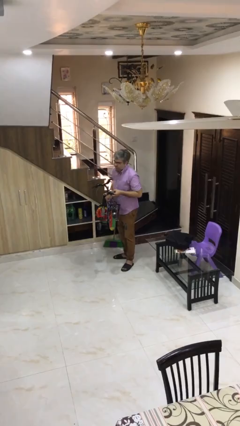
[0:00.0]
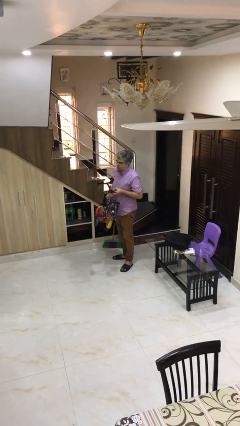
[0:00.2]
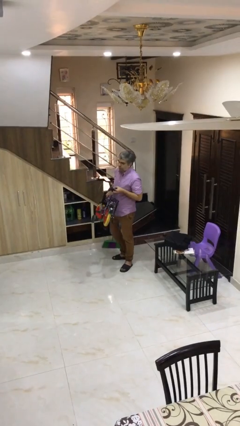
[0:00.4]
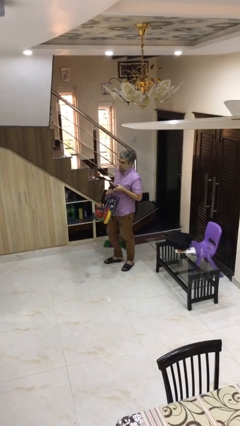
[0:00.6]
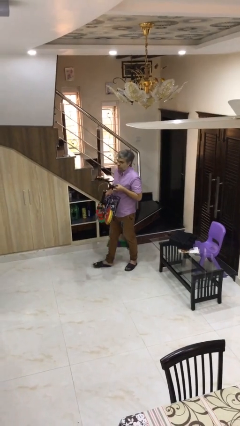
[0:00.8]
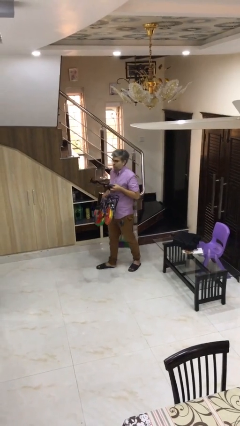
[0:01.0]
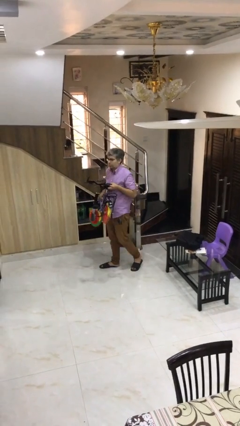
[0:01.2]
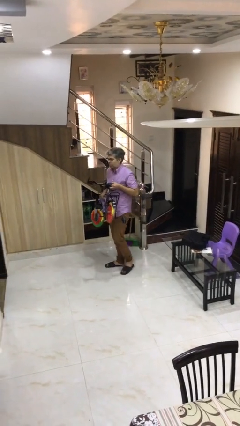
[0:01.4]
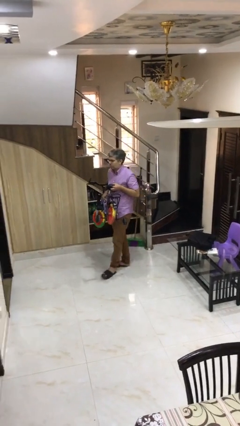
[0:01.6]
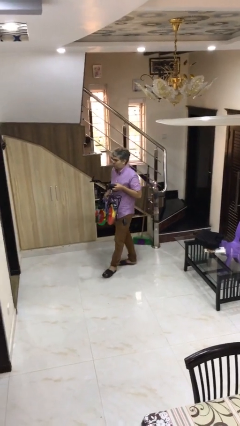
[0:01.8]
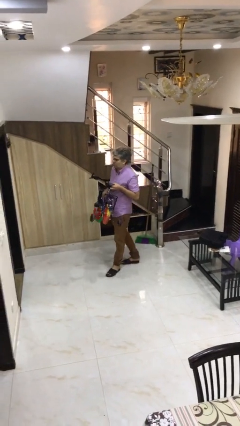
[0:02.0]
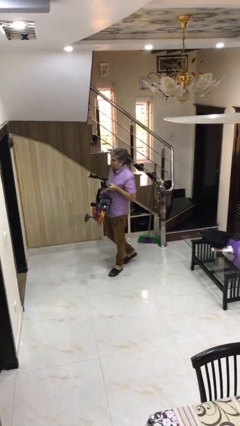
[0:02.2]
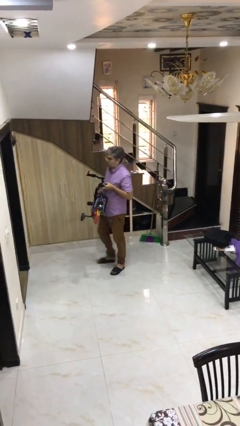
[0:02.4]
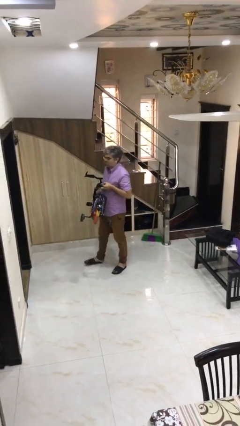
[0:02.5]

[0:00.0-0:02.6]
person carries heavy object

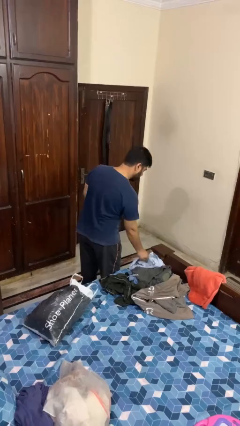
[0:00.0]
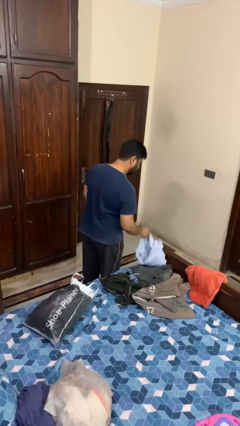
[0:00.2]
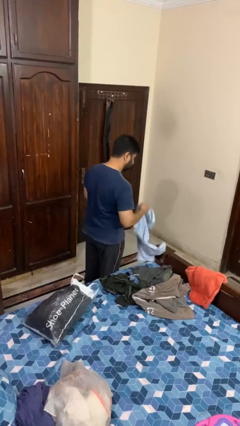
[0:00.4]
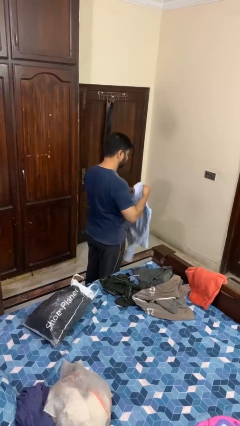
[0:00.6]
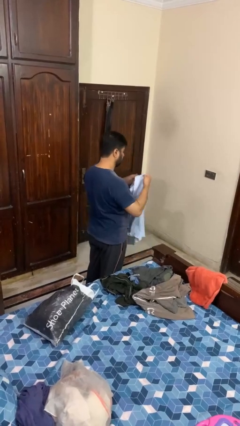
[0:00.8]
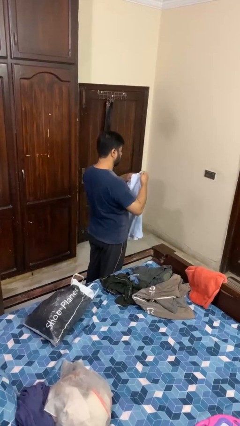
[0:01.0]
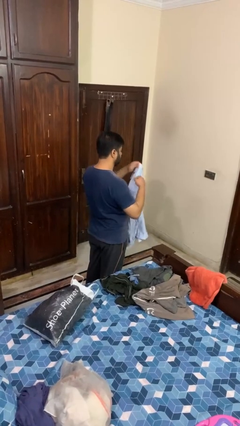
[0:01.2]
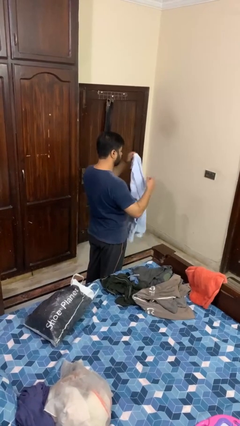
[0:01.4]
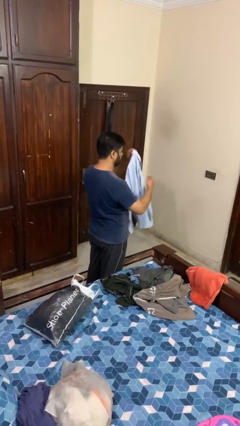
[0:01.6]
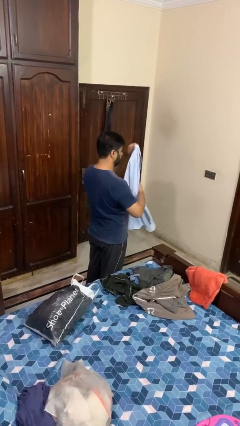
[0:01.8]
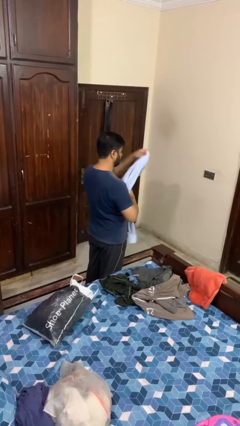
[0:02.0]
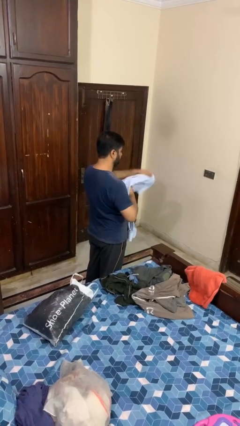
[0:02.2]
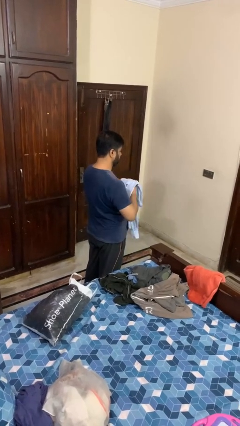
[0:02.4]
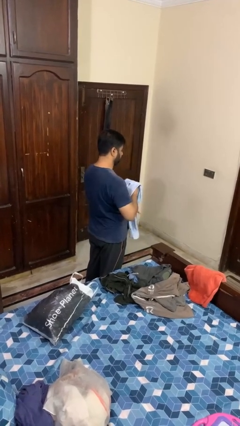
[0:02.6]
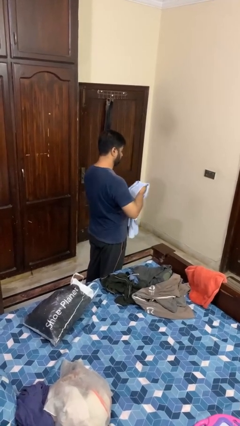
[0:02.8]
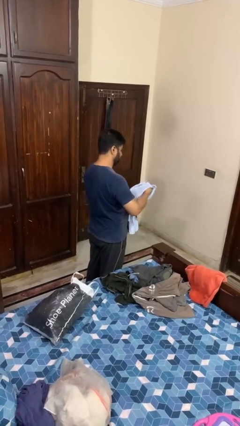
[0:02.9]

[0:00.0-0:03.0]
person folds shirt

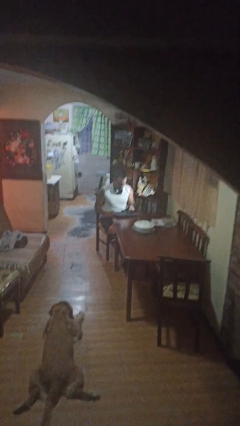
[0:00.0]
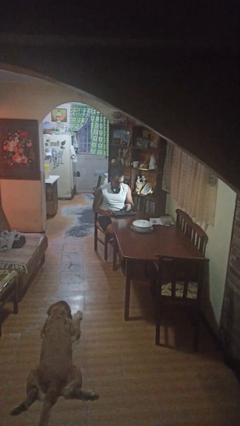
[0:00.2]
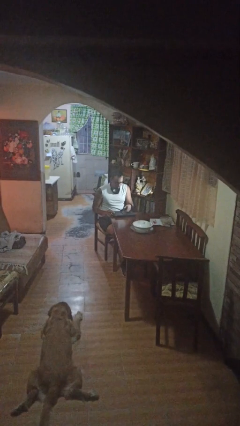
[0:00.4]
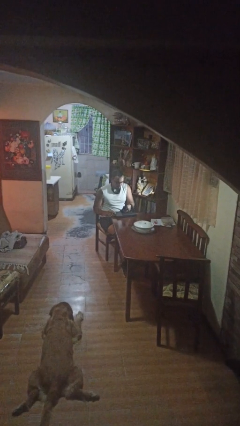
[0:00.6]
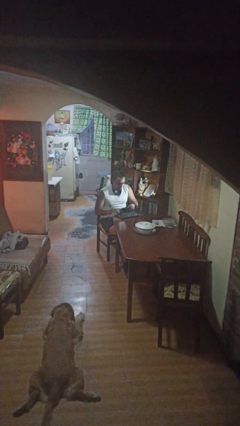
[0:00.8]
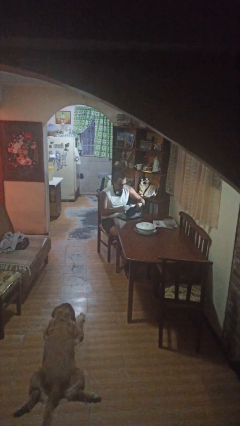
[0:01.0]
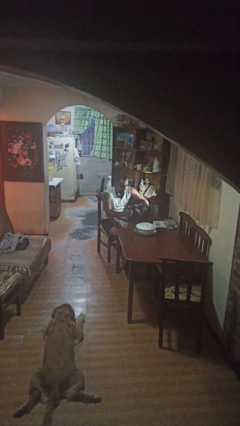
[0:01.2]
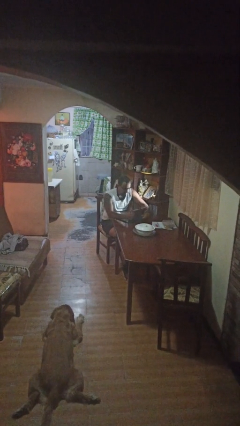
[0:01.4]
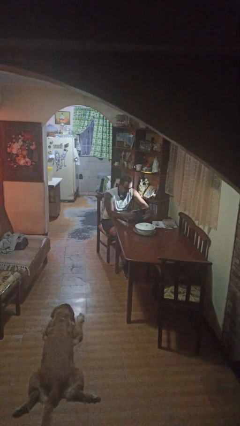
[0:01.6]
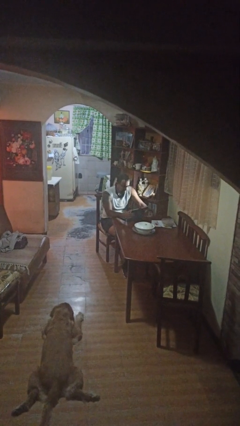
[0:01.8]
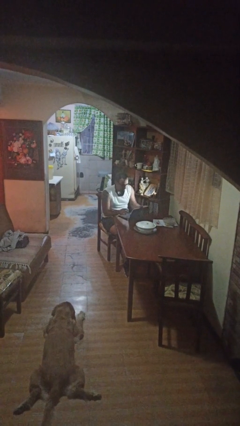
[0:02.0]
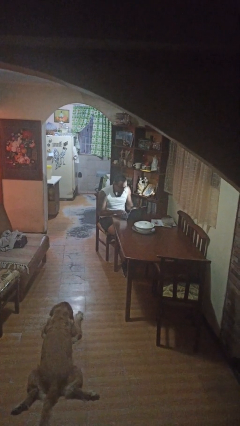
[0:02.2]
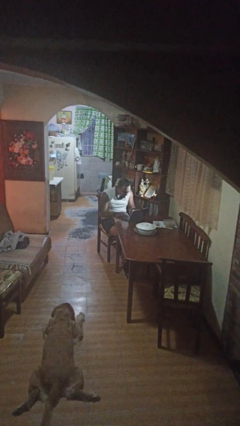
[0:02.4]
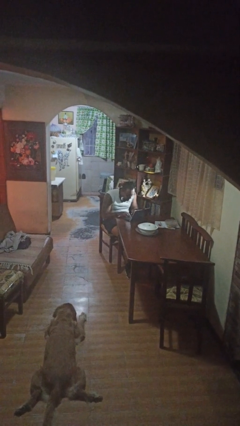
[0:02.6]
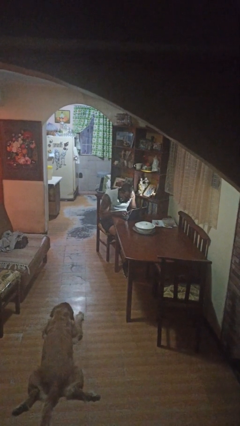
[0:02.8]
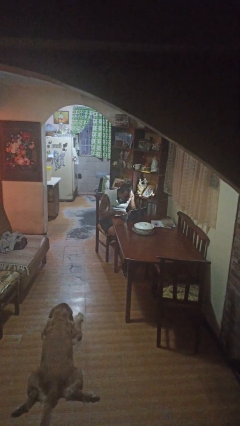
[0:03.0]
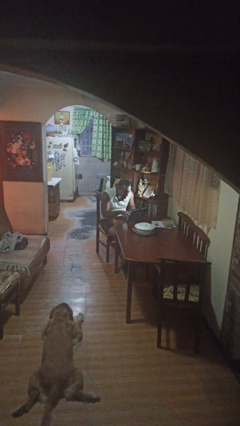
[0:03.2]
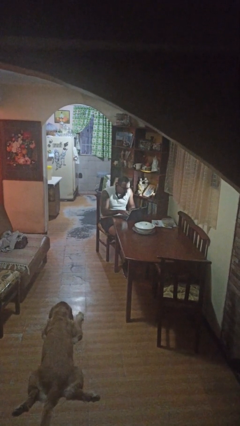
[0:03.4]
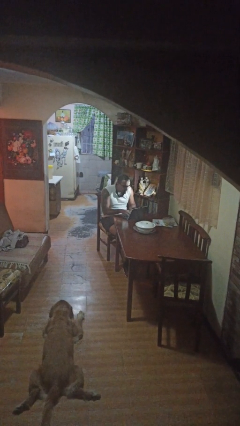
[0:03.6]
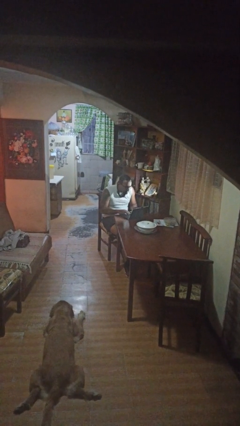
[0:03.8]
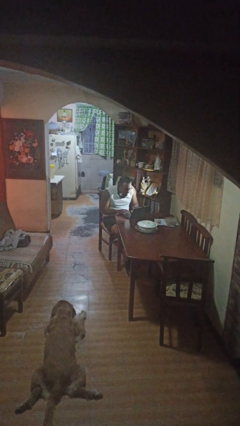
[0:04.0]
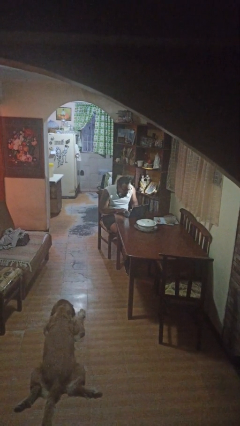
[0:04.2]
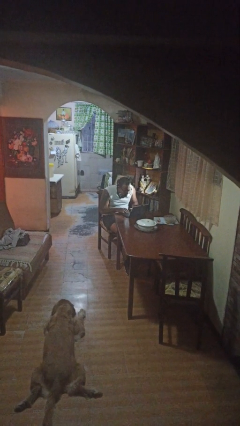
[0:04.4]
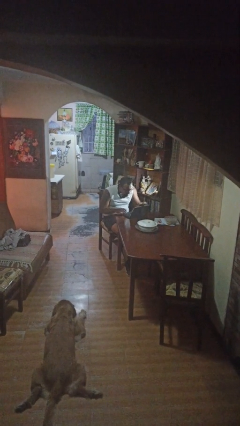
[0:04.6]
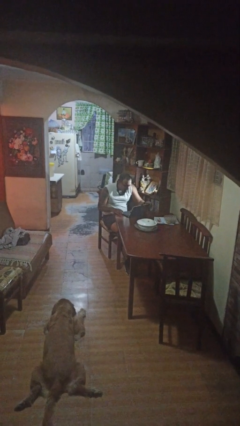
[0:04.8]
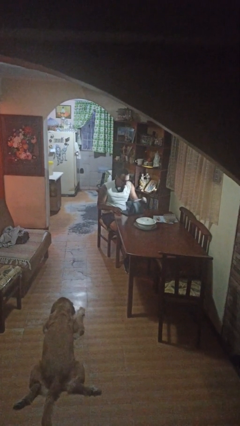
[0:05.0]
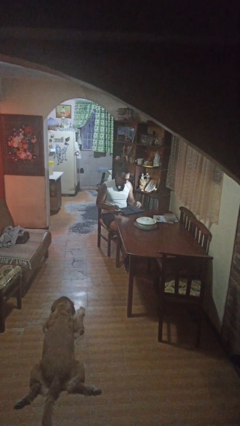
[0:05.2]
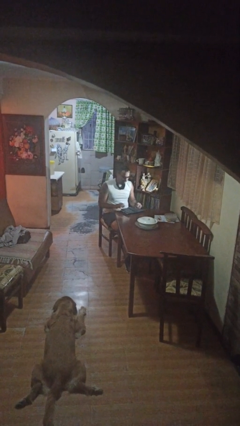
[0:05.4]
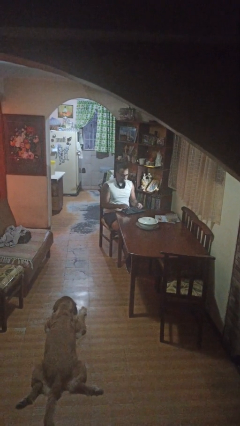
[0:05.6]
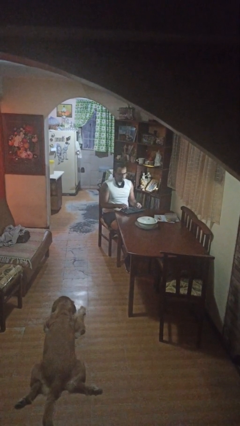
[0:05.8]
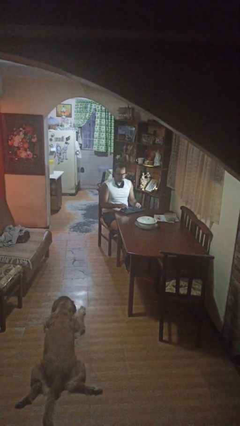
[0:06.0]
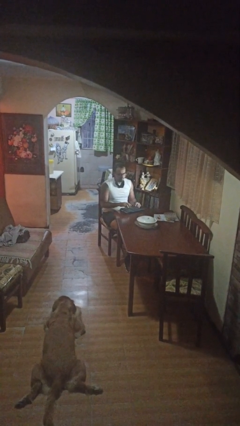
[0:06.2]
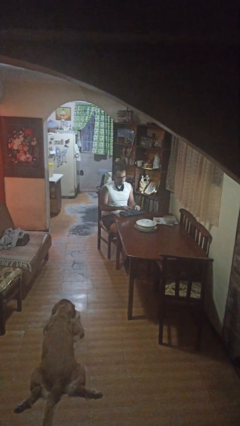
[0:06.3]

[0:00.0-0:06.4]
person interacts with laptop

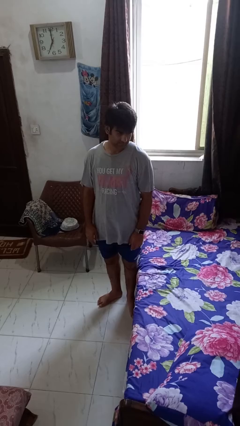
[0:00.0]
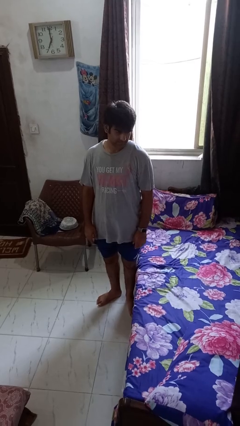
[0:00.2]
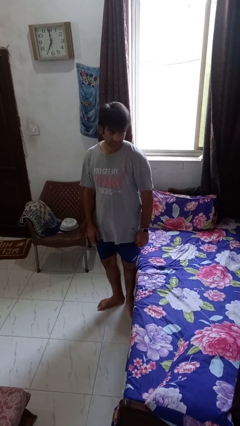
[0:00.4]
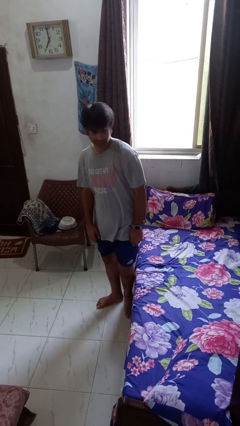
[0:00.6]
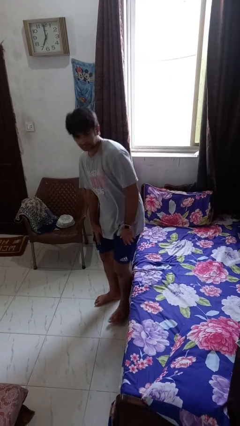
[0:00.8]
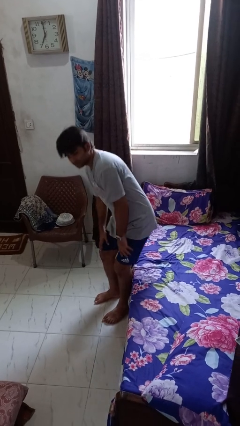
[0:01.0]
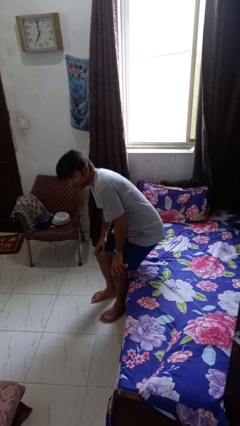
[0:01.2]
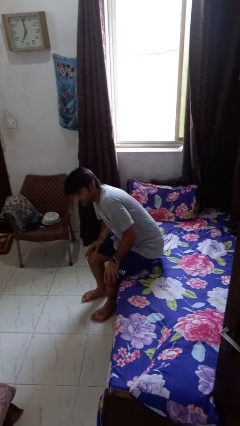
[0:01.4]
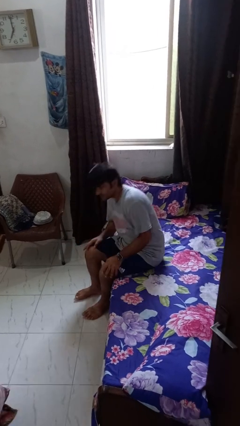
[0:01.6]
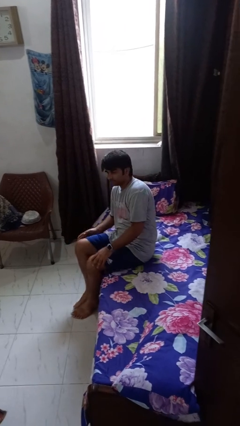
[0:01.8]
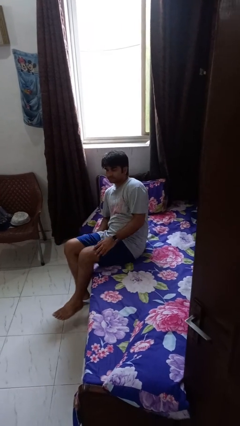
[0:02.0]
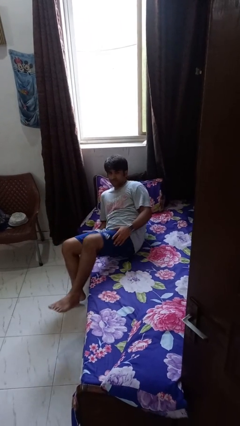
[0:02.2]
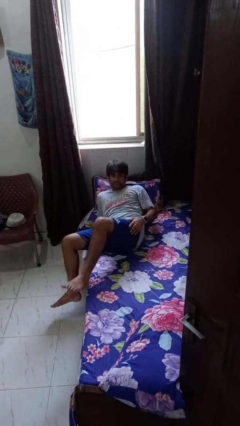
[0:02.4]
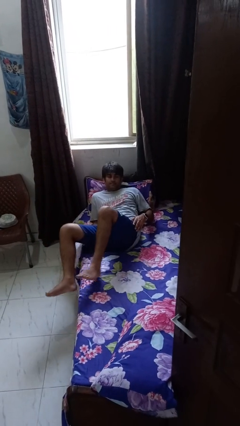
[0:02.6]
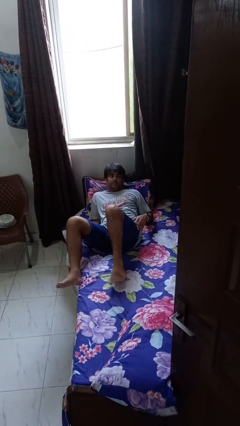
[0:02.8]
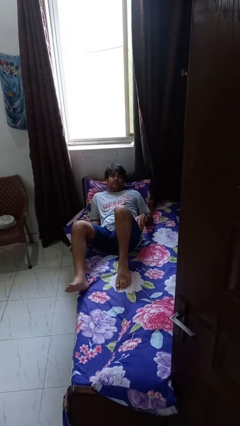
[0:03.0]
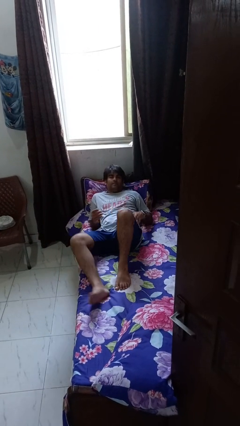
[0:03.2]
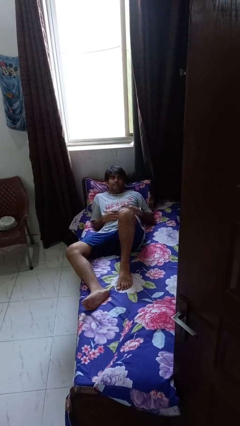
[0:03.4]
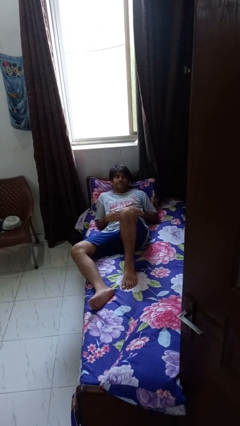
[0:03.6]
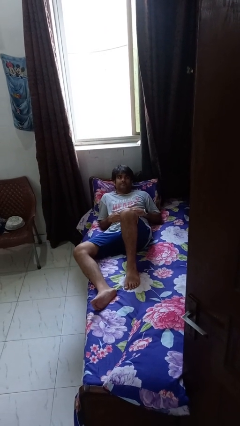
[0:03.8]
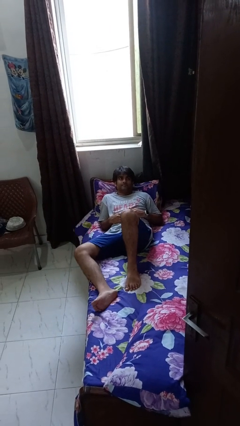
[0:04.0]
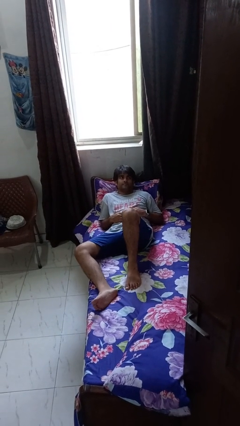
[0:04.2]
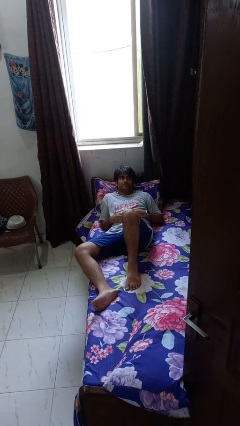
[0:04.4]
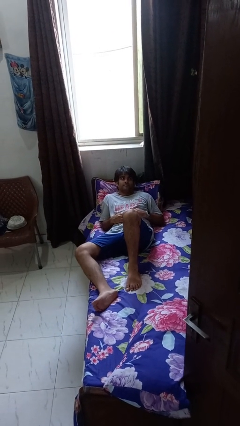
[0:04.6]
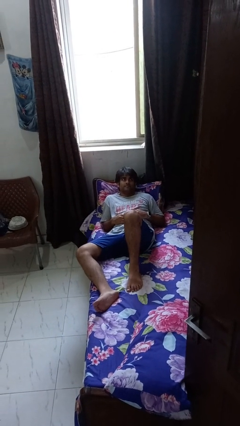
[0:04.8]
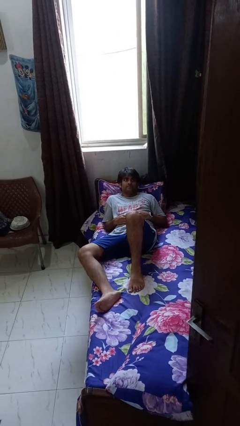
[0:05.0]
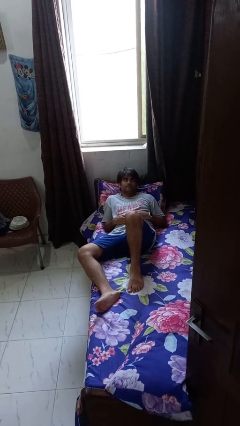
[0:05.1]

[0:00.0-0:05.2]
person lies down on bed

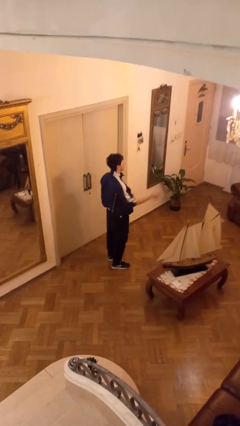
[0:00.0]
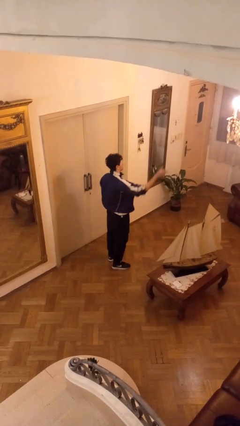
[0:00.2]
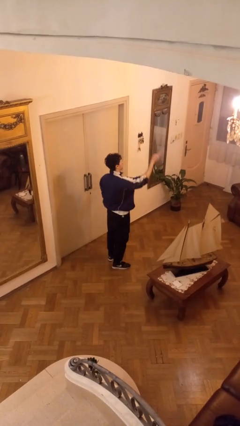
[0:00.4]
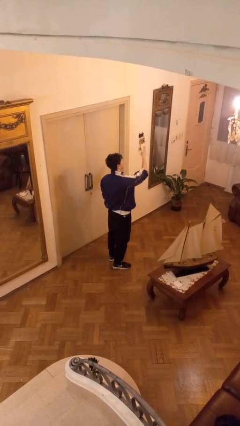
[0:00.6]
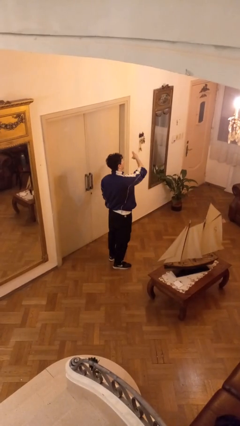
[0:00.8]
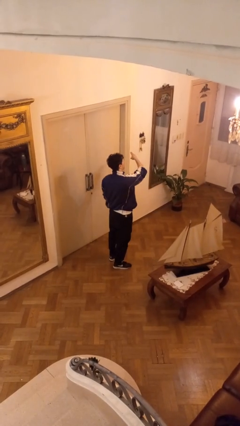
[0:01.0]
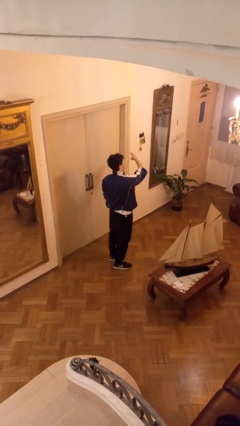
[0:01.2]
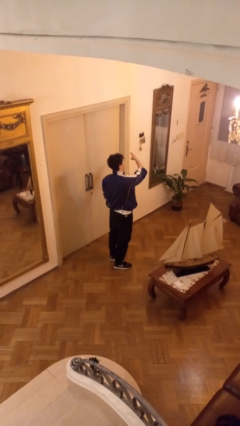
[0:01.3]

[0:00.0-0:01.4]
person gestures swipe left
